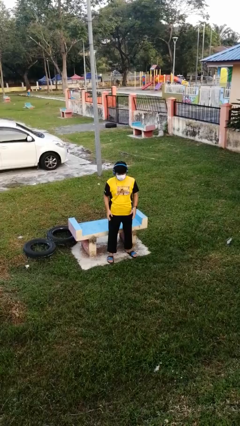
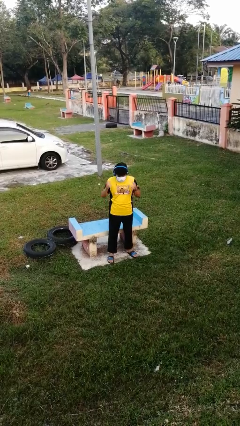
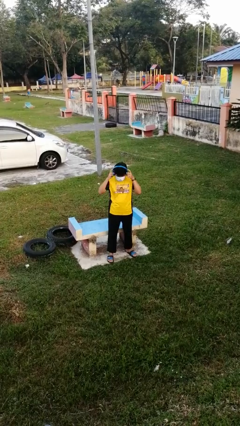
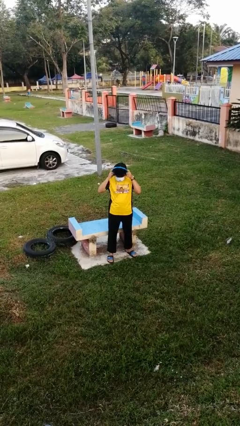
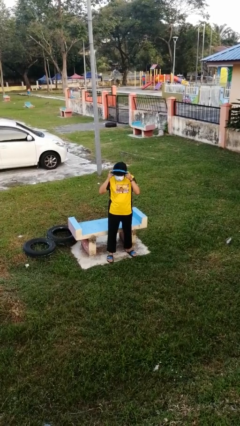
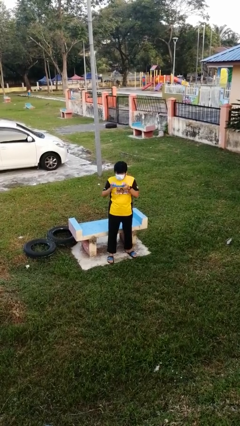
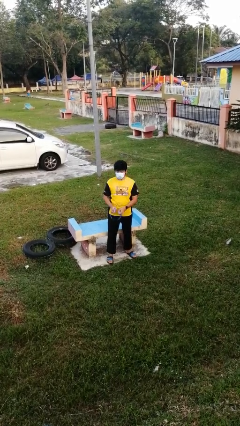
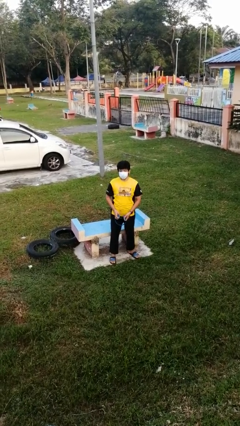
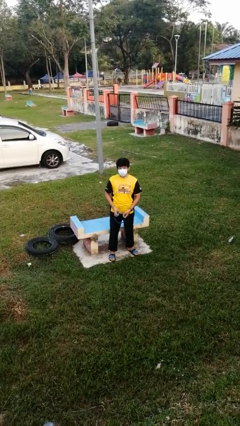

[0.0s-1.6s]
person takes off headphones

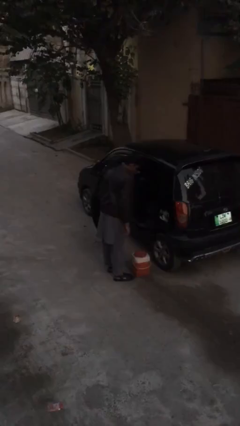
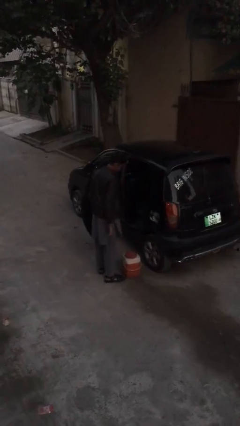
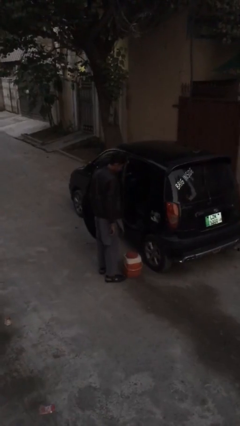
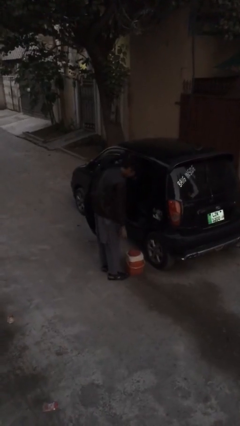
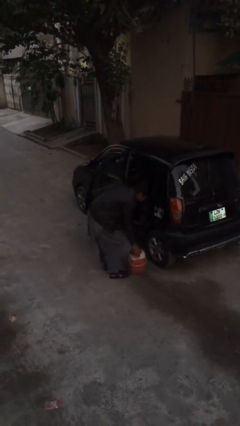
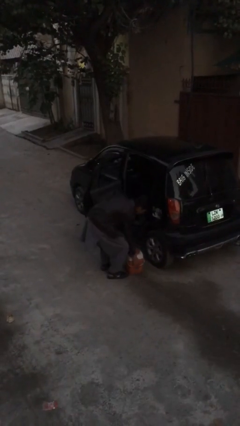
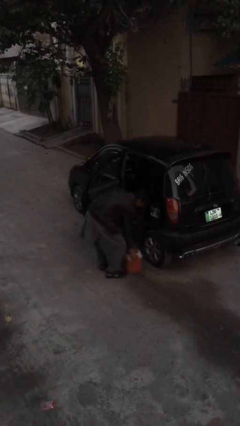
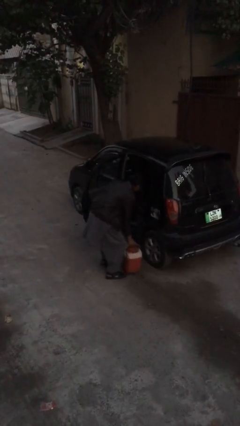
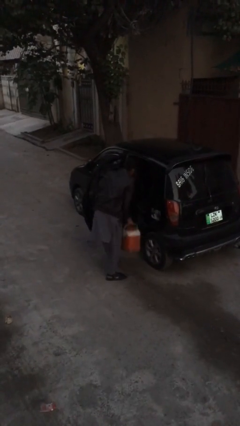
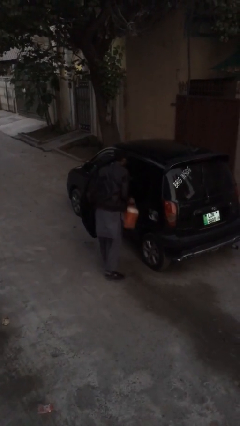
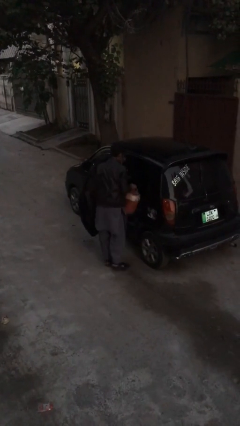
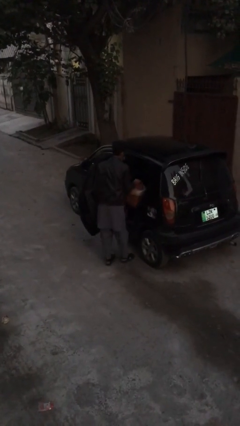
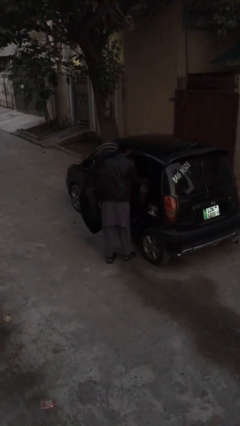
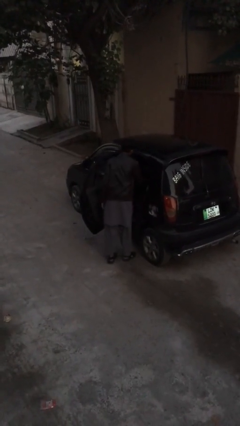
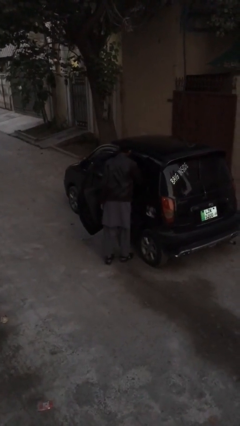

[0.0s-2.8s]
person loads car

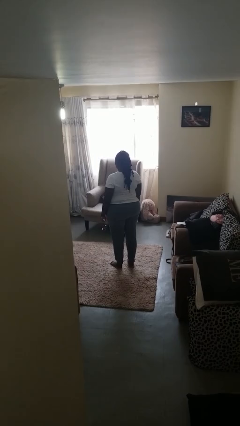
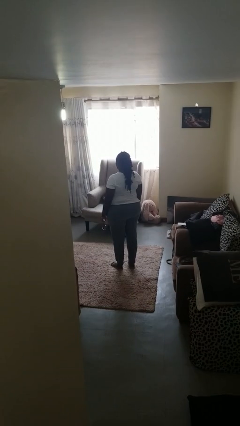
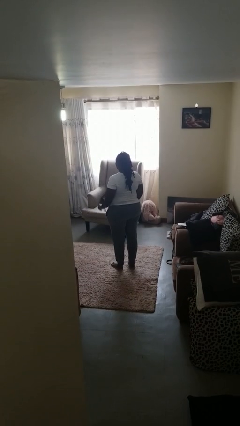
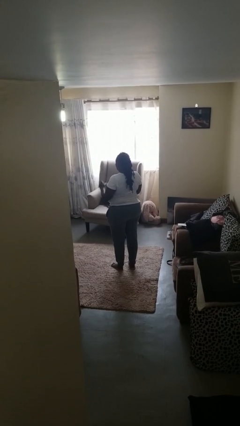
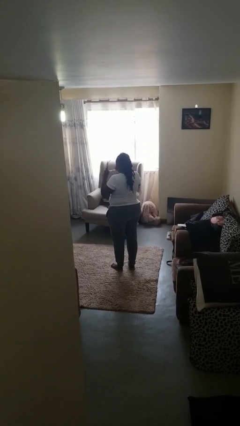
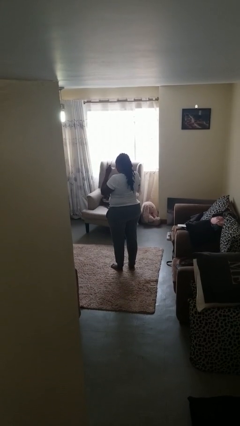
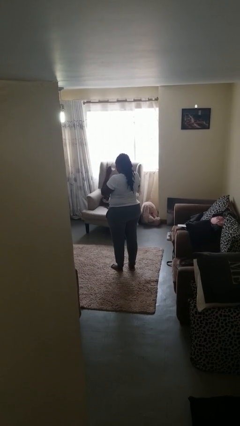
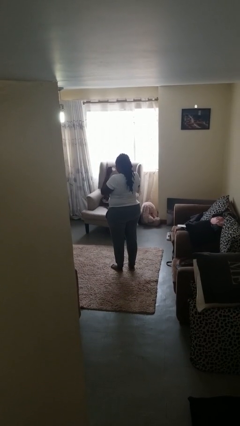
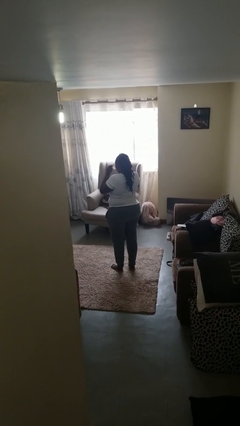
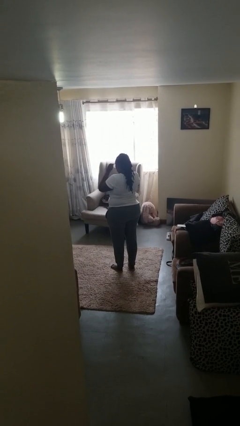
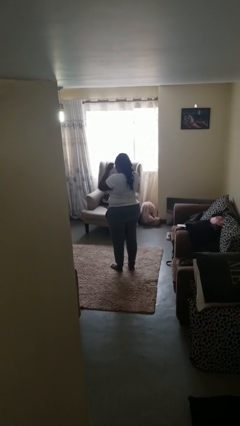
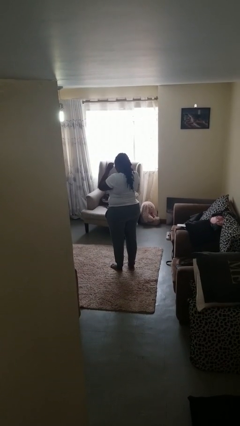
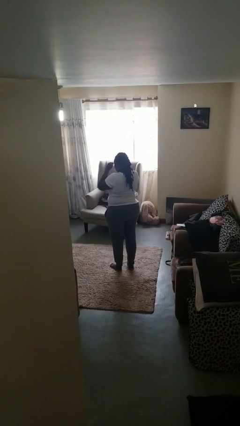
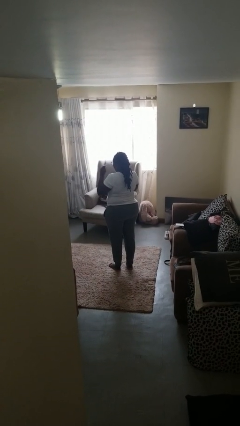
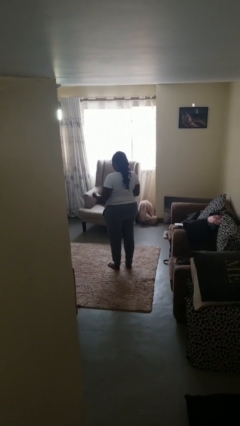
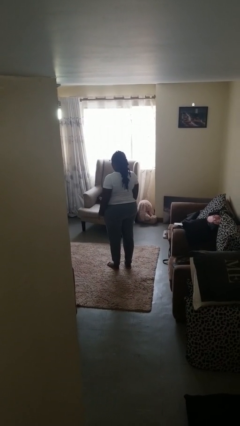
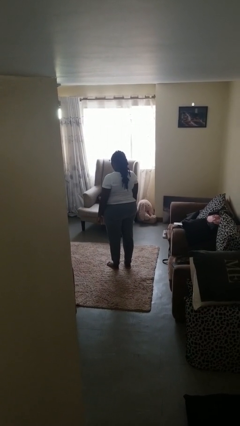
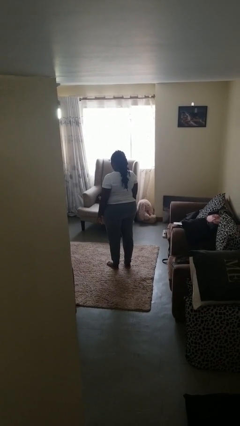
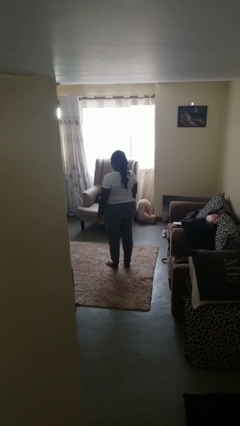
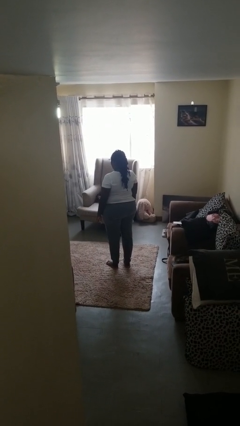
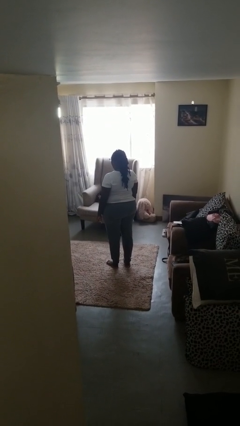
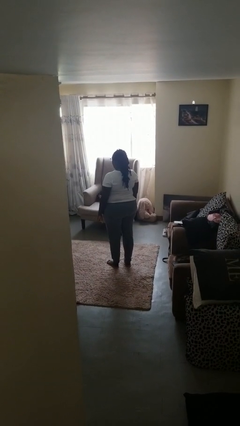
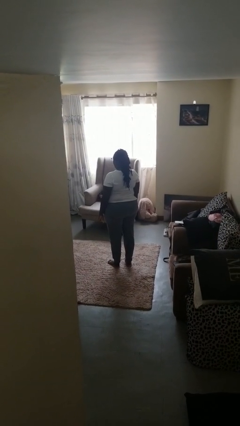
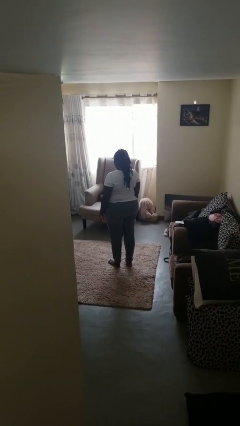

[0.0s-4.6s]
person puts on glasses

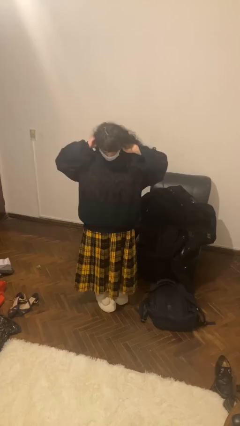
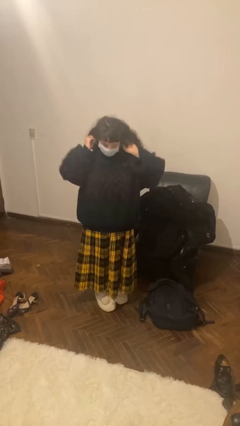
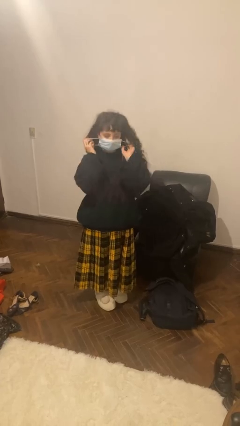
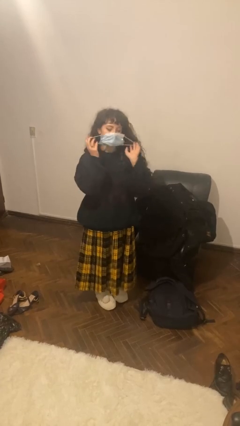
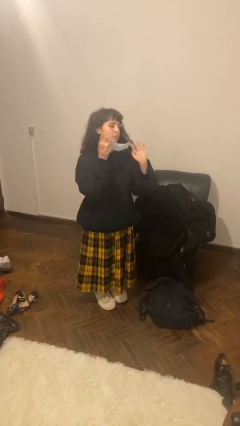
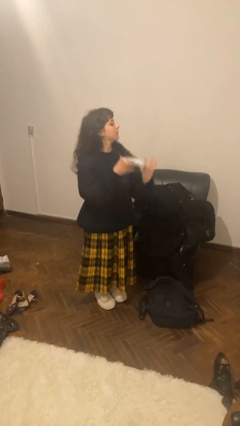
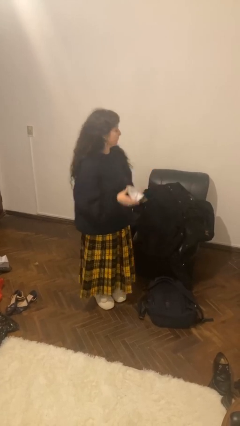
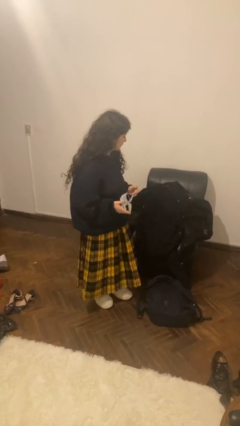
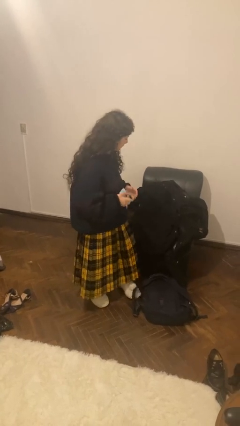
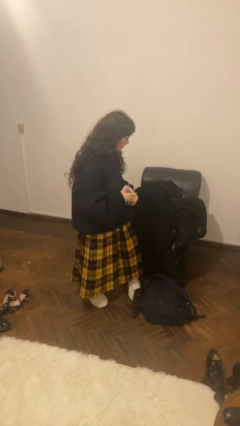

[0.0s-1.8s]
person takes off facemask

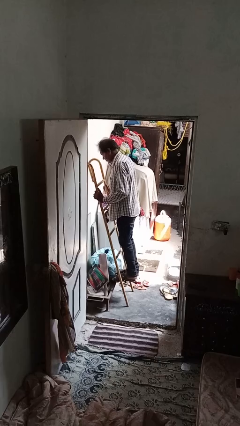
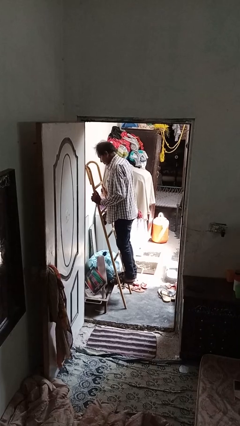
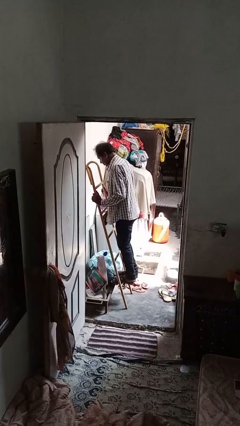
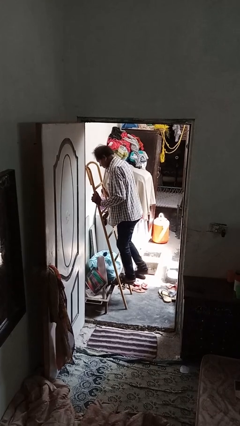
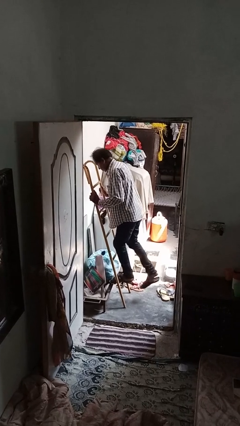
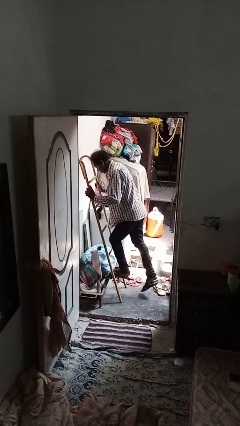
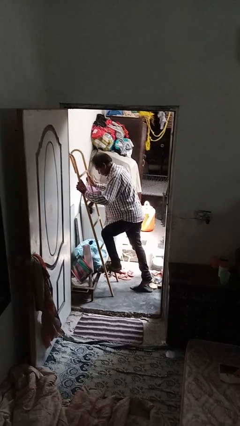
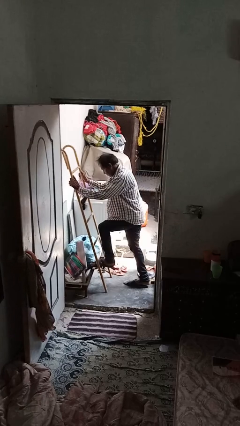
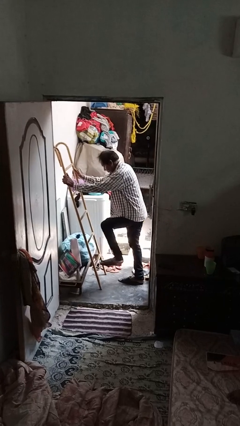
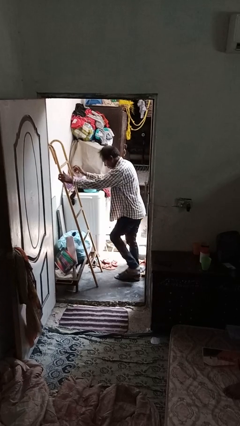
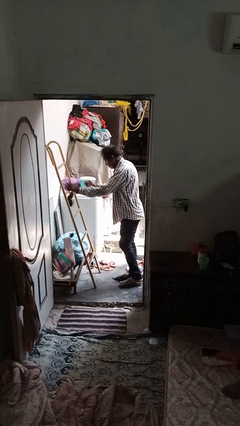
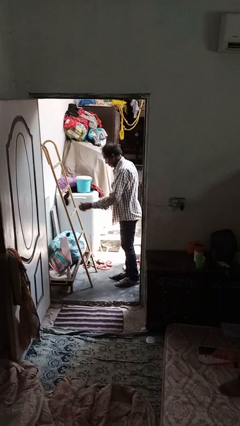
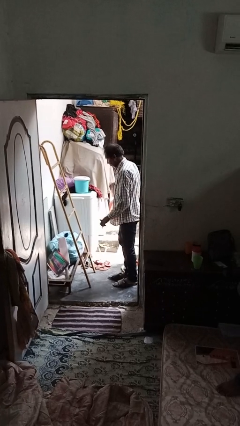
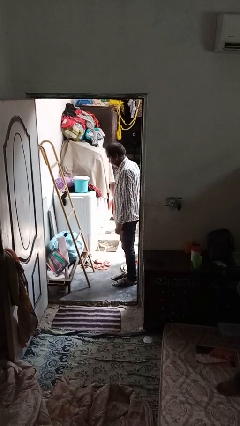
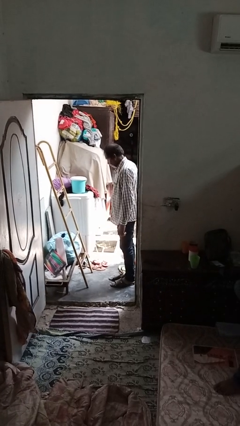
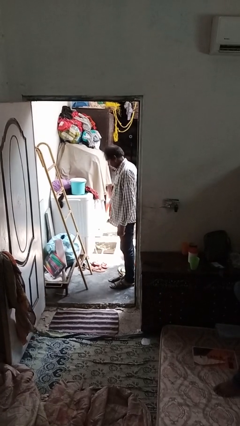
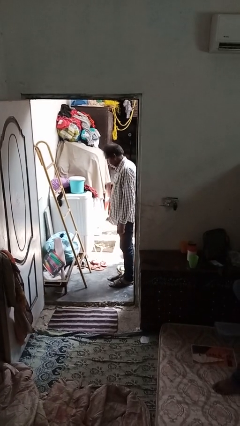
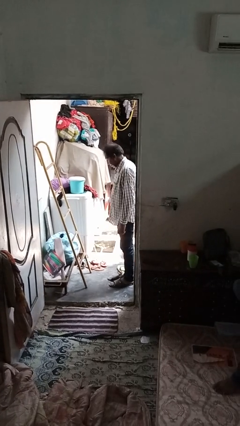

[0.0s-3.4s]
person climbs down ladder

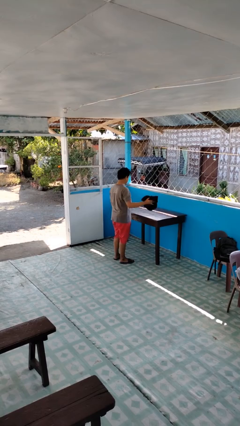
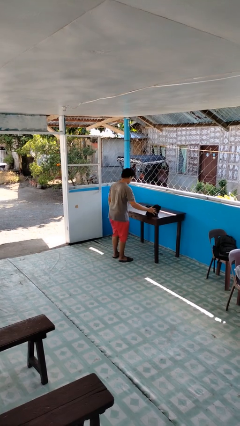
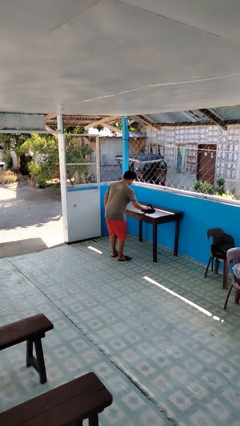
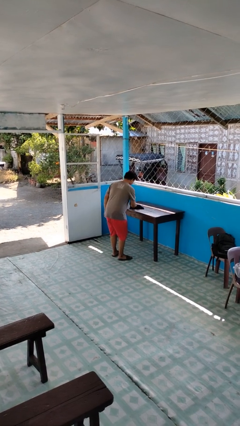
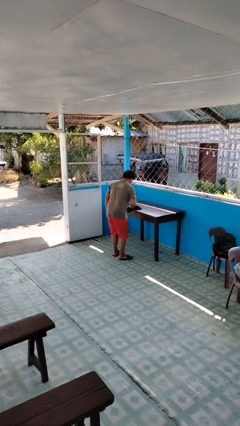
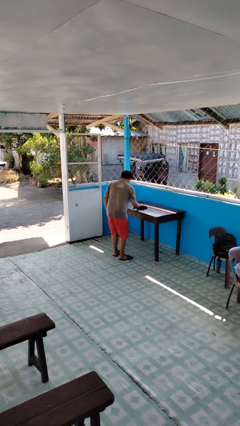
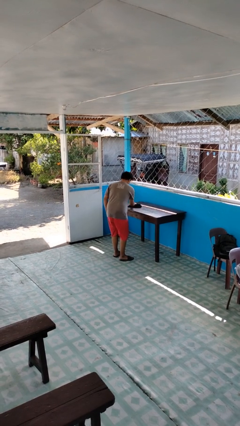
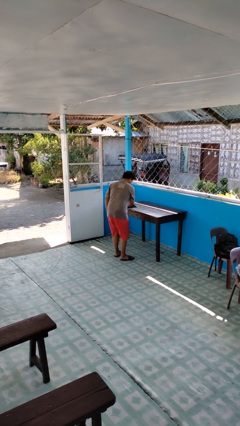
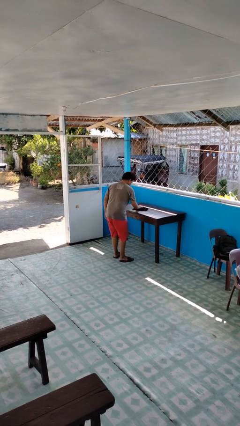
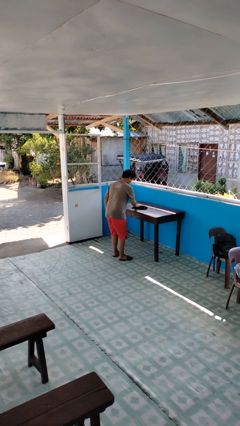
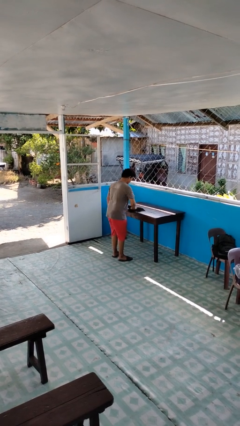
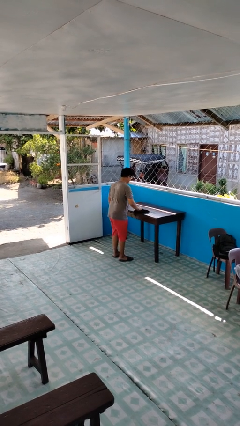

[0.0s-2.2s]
person cleans table with rag

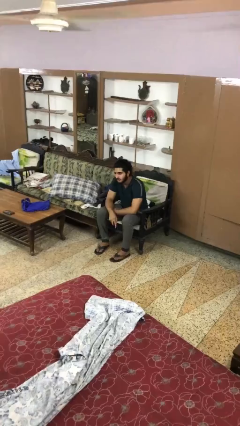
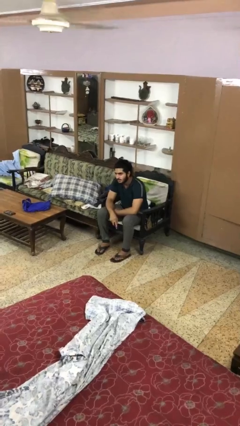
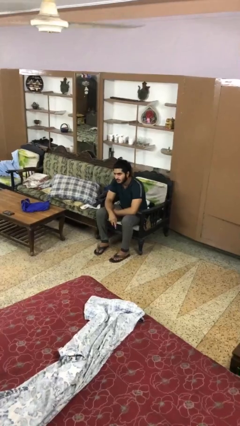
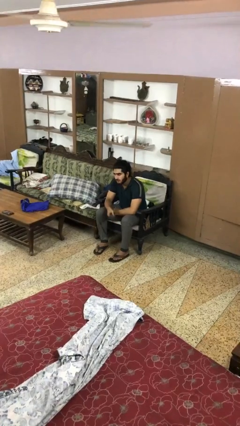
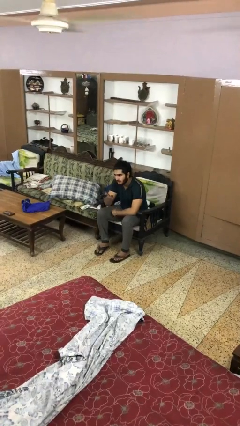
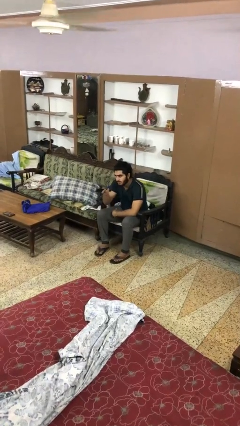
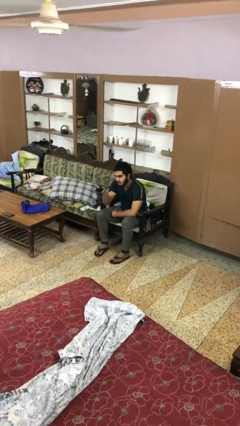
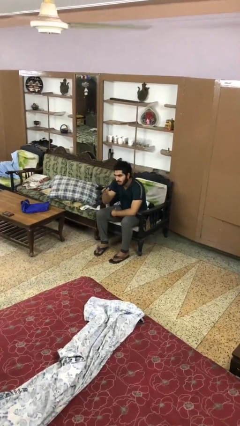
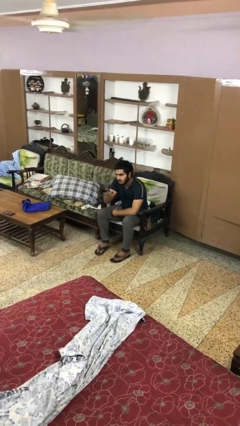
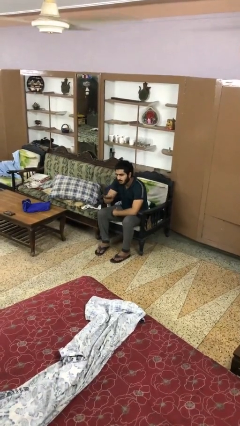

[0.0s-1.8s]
person uses television remote
